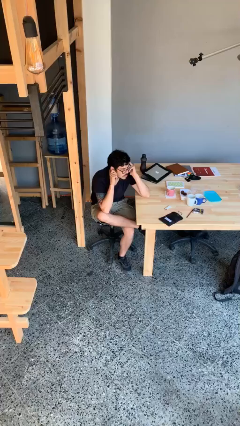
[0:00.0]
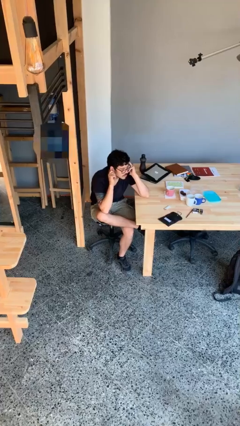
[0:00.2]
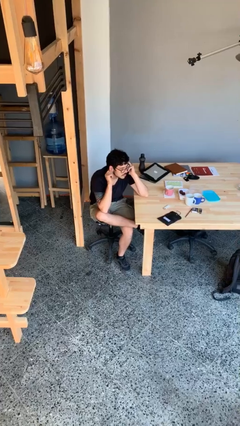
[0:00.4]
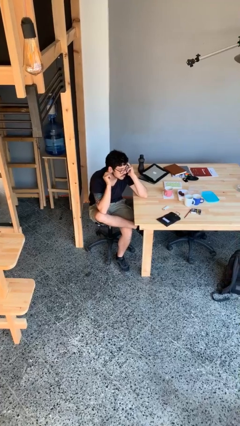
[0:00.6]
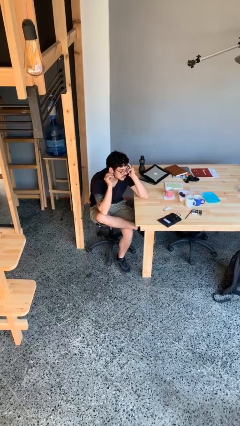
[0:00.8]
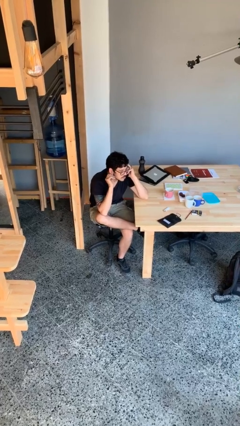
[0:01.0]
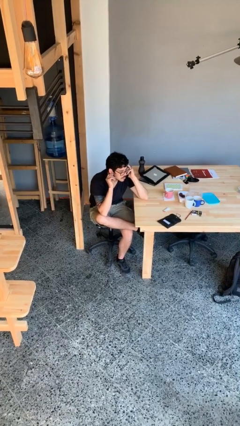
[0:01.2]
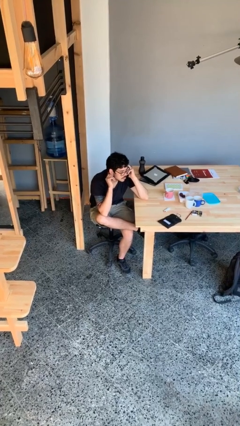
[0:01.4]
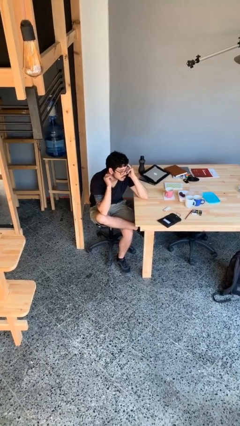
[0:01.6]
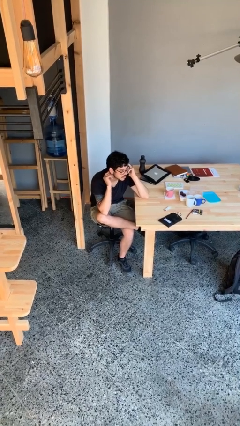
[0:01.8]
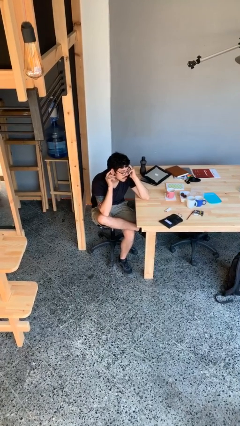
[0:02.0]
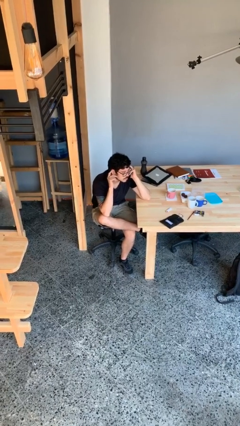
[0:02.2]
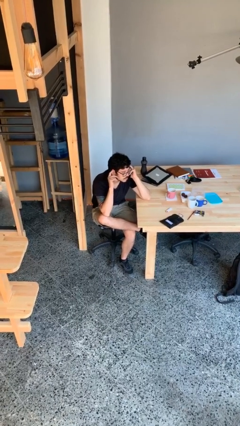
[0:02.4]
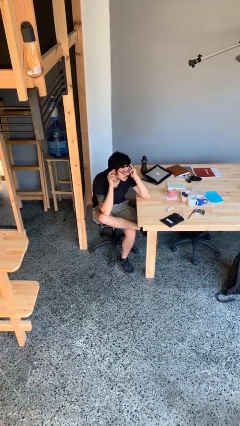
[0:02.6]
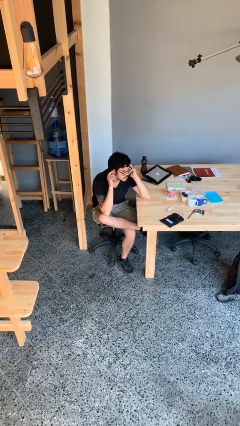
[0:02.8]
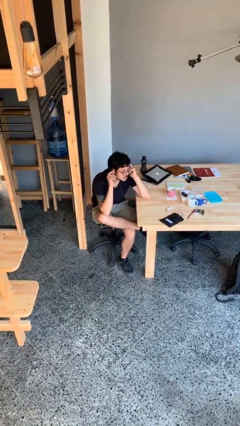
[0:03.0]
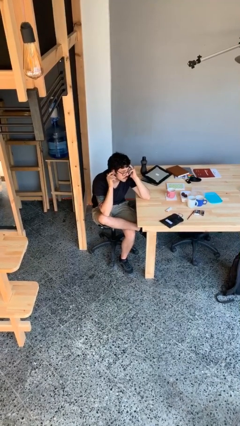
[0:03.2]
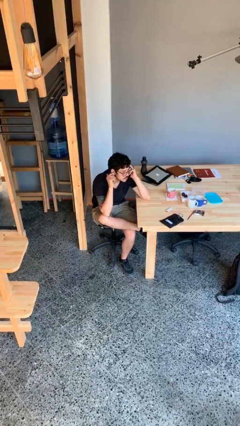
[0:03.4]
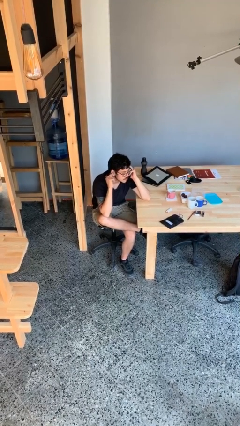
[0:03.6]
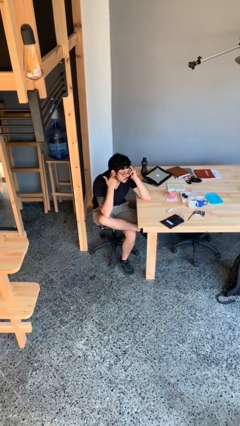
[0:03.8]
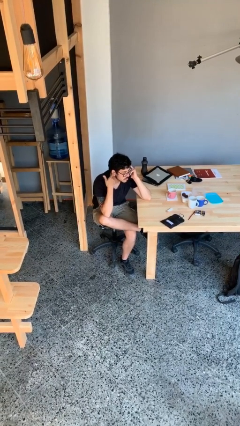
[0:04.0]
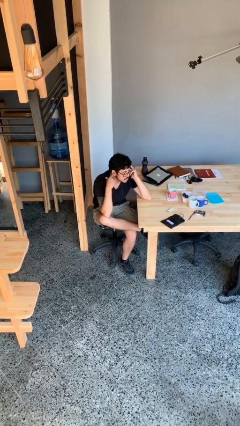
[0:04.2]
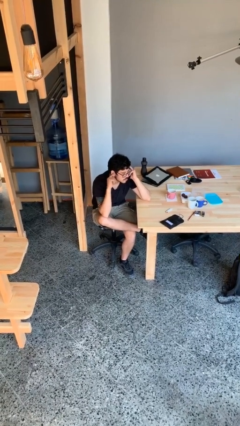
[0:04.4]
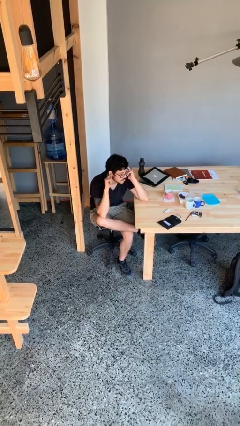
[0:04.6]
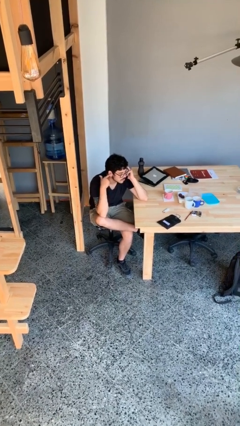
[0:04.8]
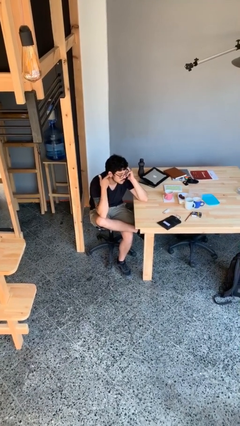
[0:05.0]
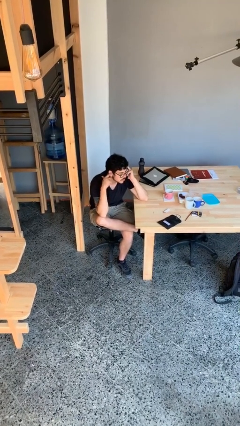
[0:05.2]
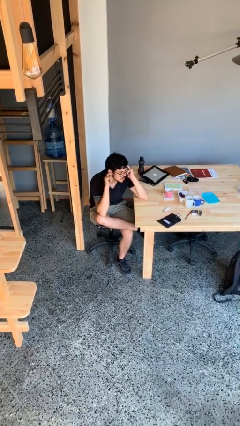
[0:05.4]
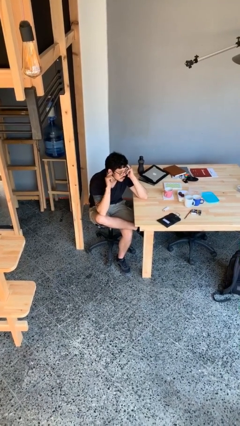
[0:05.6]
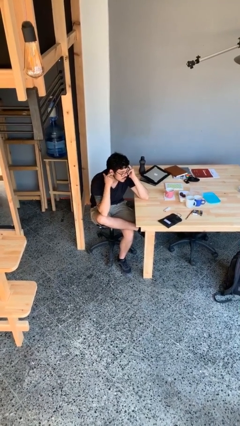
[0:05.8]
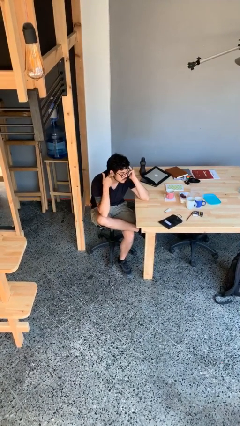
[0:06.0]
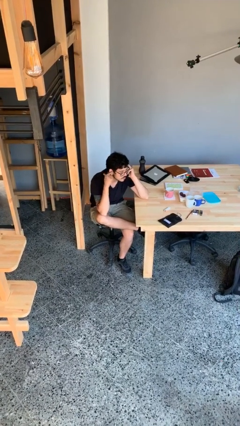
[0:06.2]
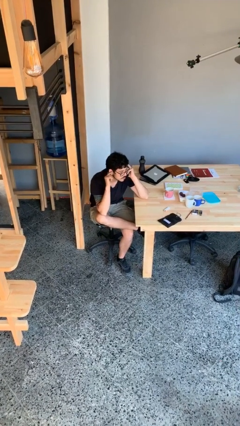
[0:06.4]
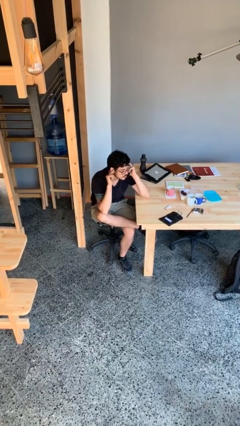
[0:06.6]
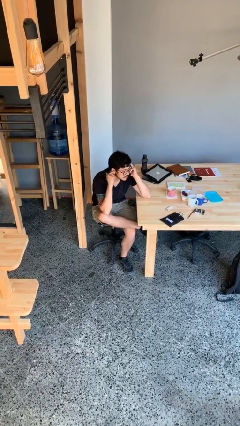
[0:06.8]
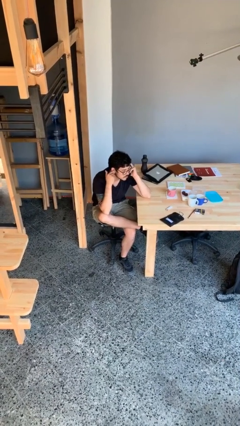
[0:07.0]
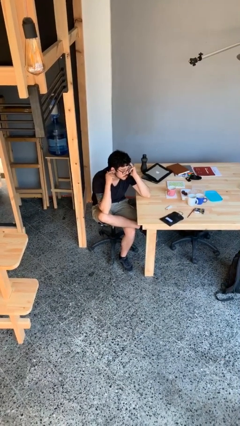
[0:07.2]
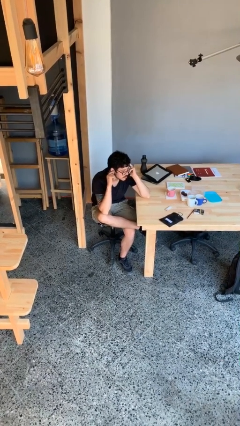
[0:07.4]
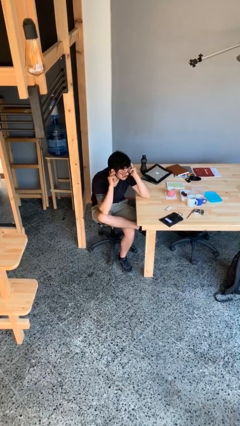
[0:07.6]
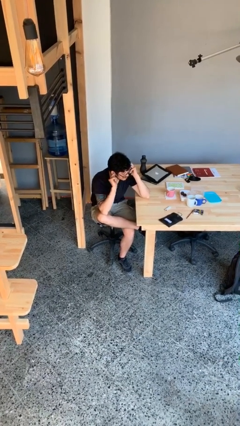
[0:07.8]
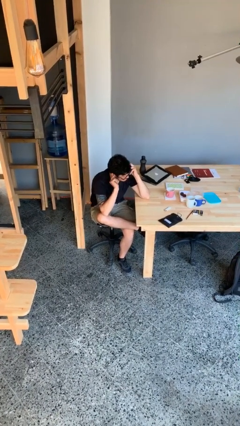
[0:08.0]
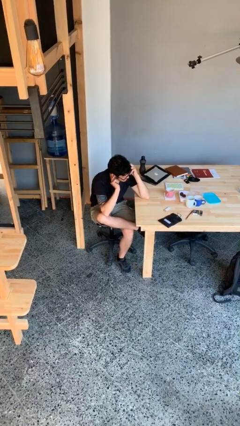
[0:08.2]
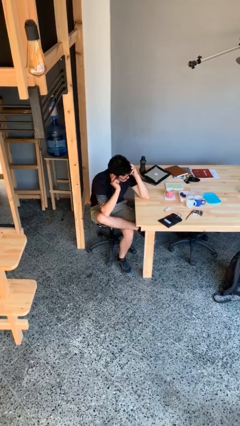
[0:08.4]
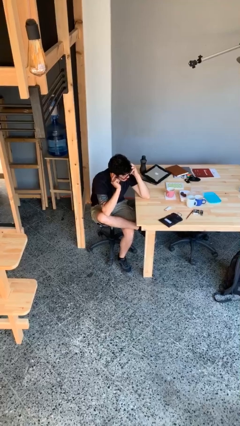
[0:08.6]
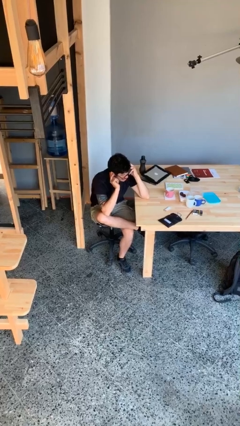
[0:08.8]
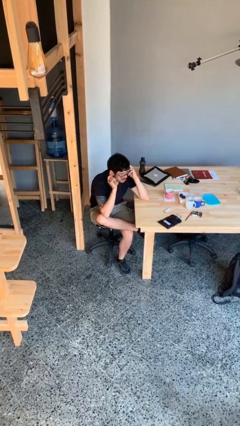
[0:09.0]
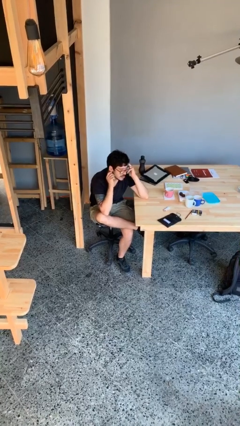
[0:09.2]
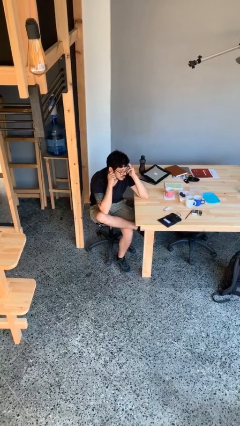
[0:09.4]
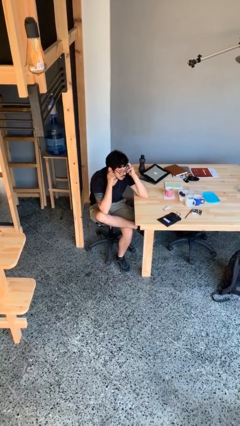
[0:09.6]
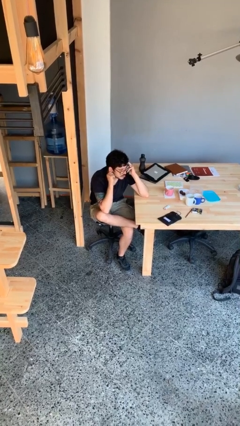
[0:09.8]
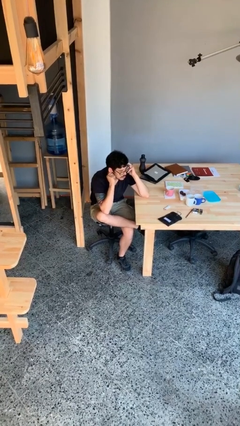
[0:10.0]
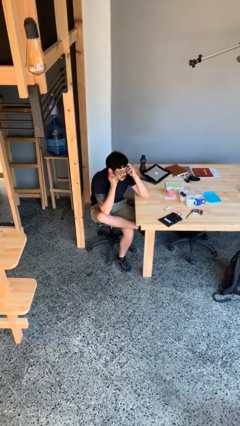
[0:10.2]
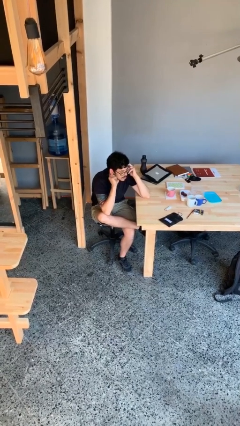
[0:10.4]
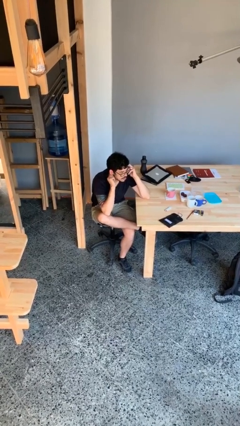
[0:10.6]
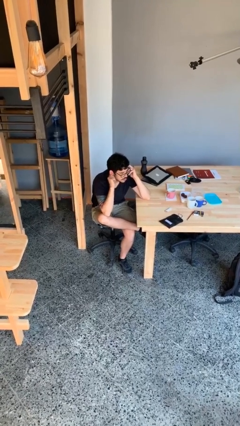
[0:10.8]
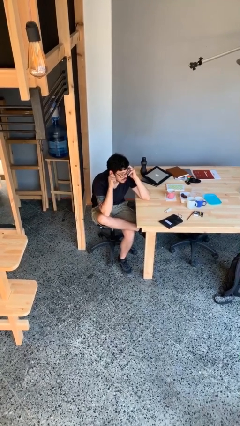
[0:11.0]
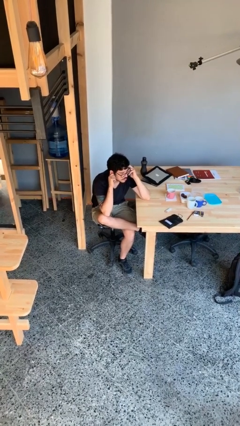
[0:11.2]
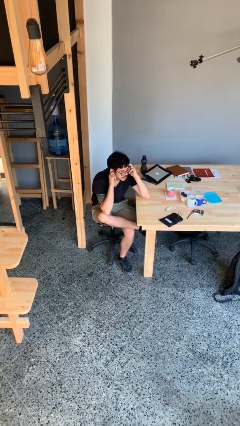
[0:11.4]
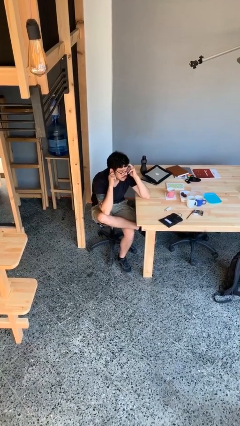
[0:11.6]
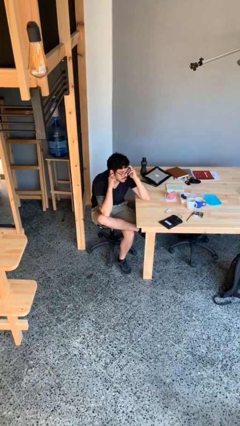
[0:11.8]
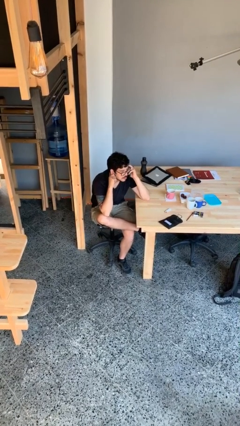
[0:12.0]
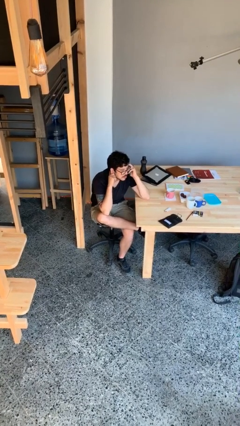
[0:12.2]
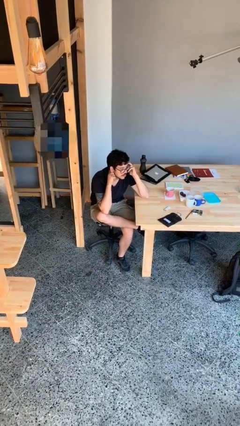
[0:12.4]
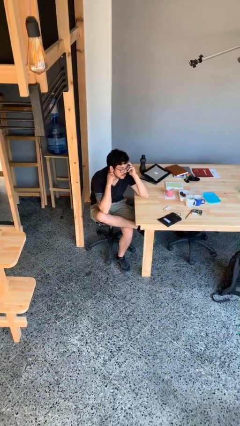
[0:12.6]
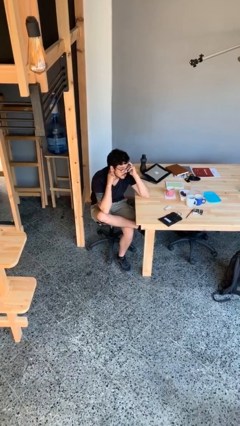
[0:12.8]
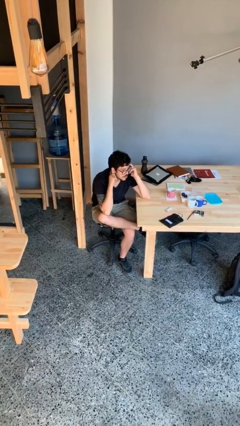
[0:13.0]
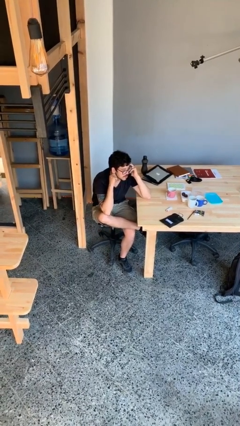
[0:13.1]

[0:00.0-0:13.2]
person talks on phone

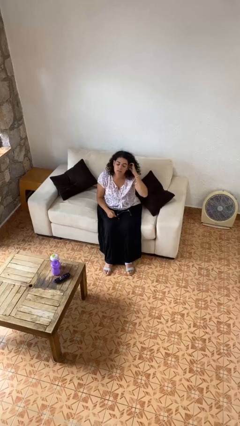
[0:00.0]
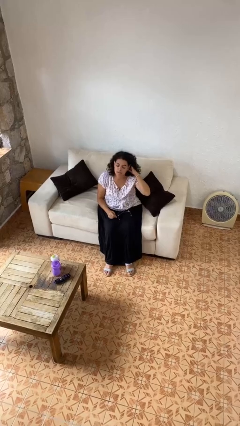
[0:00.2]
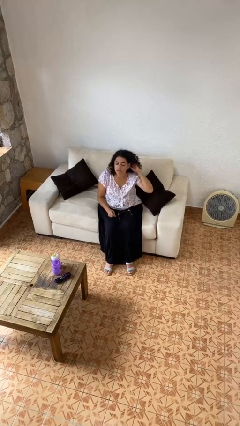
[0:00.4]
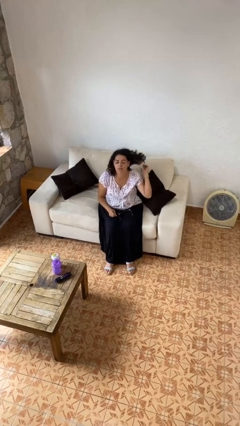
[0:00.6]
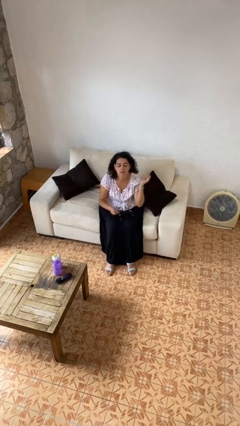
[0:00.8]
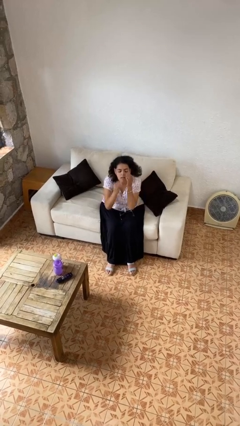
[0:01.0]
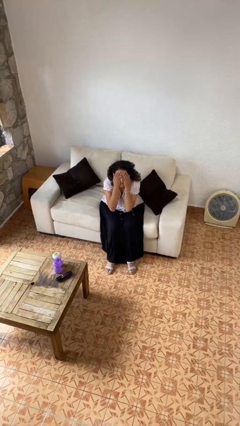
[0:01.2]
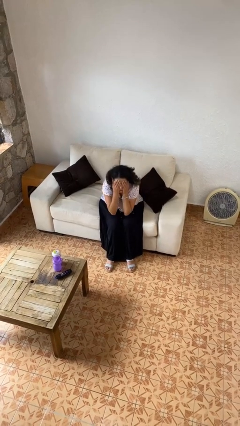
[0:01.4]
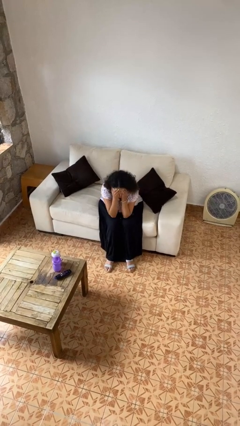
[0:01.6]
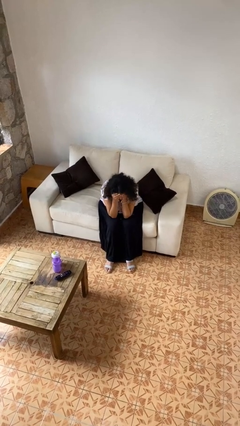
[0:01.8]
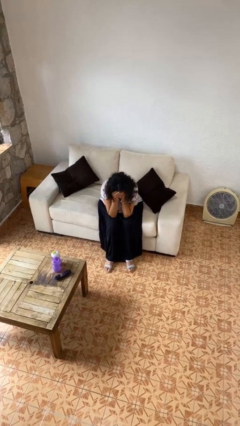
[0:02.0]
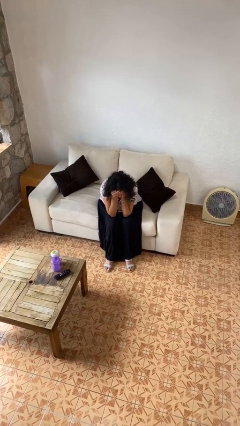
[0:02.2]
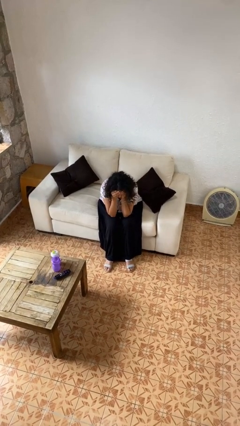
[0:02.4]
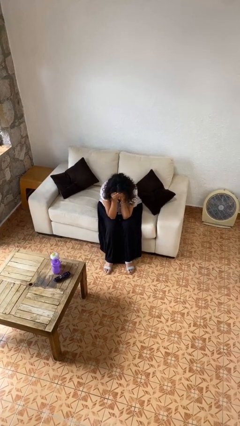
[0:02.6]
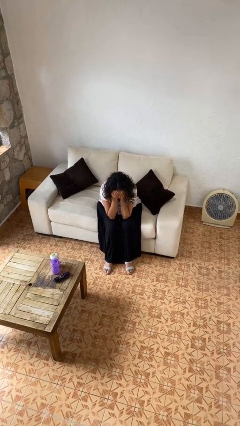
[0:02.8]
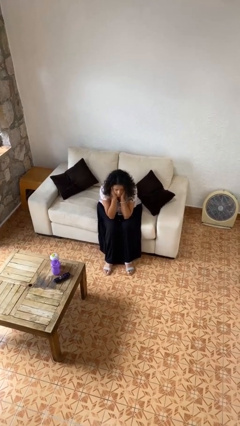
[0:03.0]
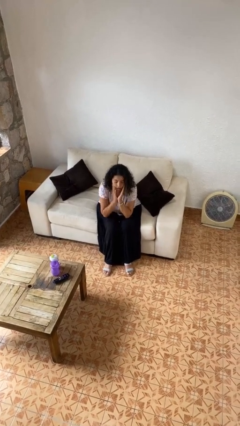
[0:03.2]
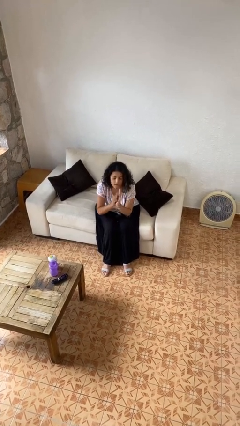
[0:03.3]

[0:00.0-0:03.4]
person covers face with hands

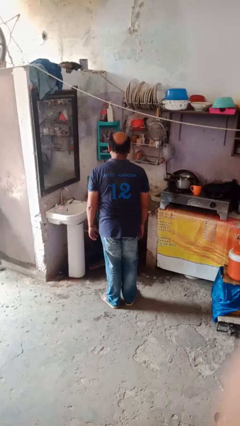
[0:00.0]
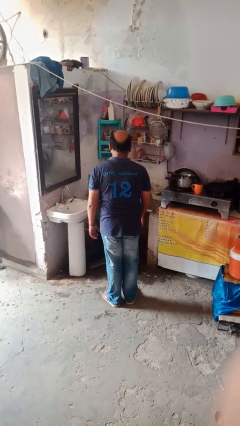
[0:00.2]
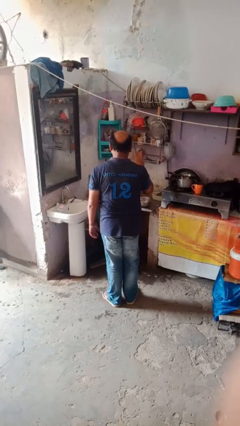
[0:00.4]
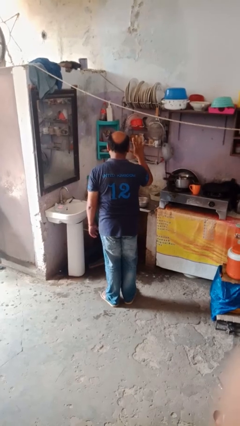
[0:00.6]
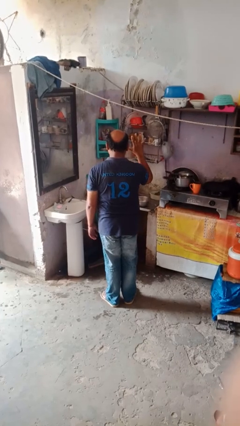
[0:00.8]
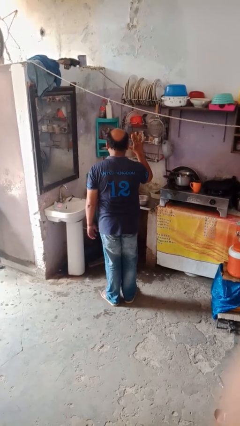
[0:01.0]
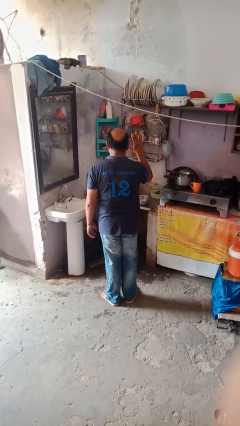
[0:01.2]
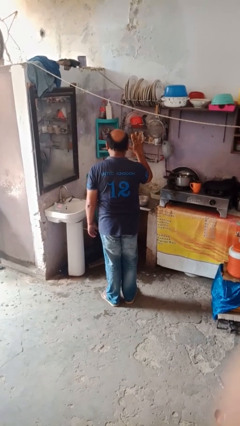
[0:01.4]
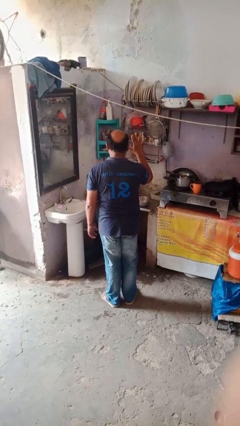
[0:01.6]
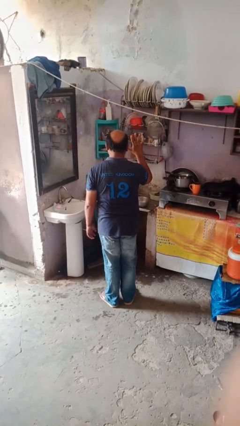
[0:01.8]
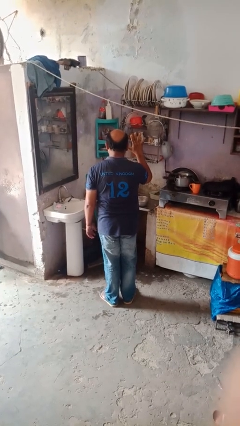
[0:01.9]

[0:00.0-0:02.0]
person gestures number five
